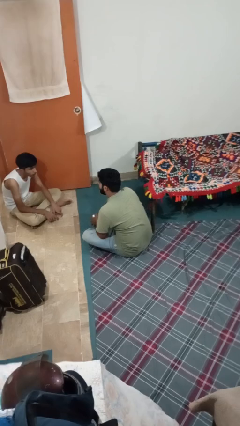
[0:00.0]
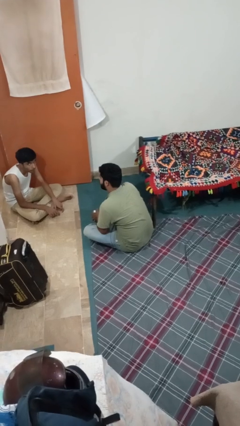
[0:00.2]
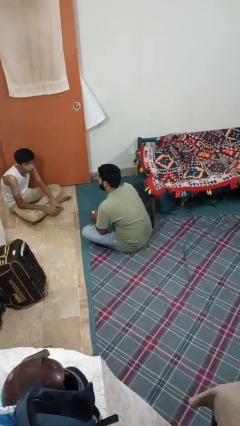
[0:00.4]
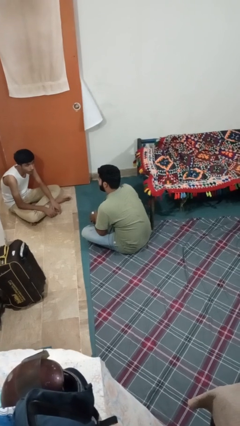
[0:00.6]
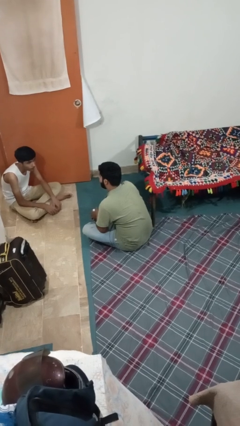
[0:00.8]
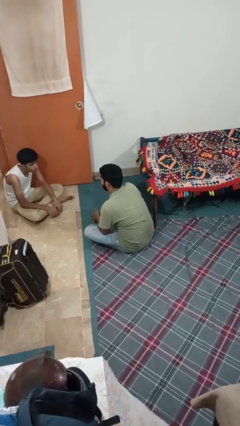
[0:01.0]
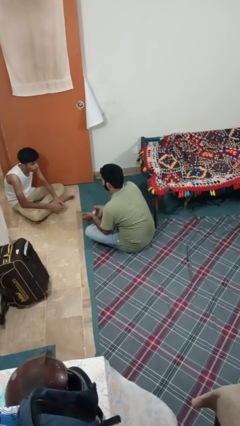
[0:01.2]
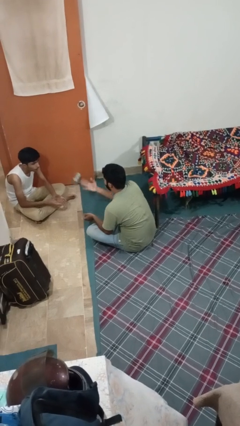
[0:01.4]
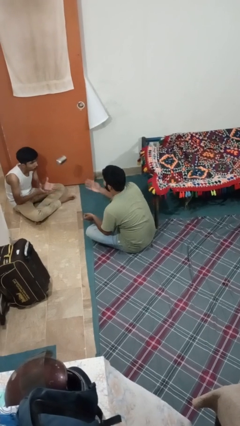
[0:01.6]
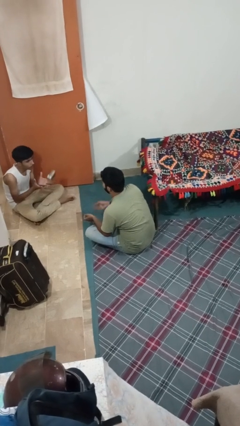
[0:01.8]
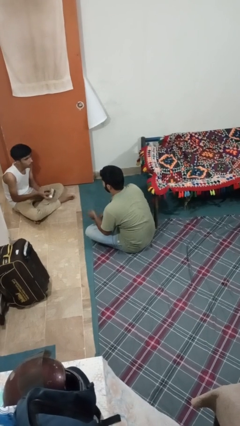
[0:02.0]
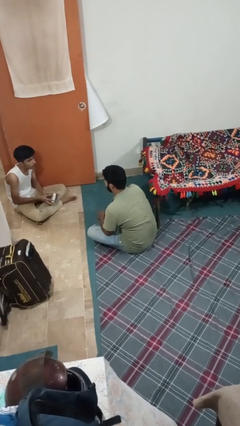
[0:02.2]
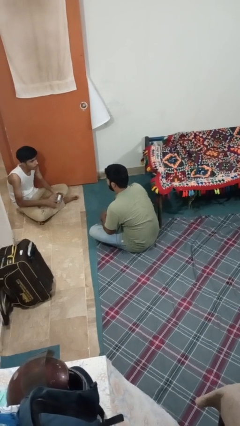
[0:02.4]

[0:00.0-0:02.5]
person throws object to person

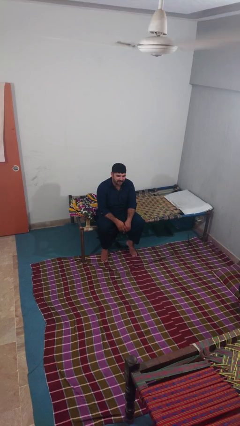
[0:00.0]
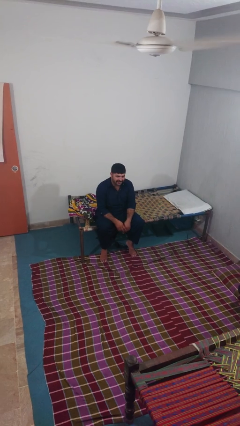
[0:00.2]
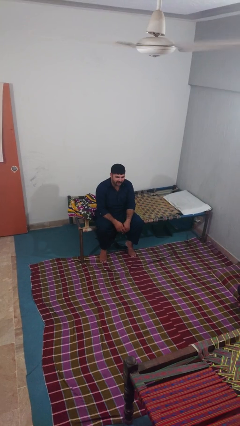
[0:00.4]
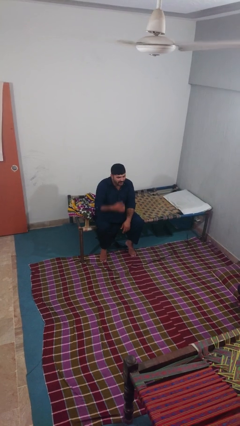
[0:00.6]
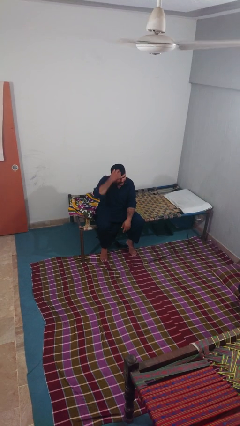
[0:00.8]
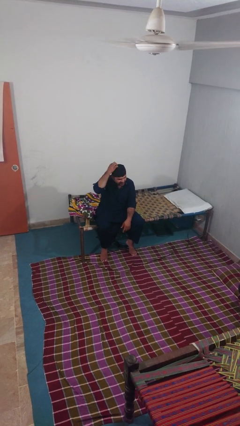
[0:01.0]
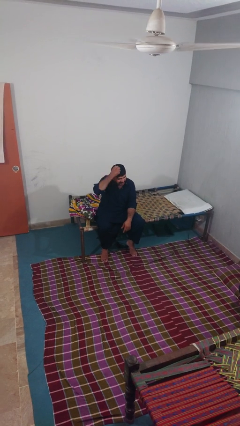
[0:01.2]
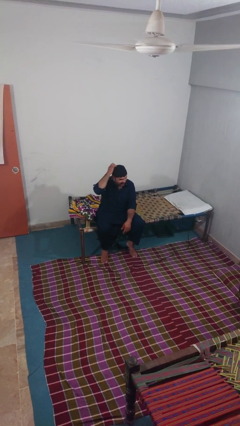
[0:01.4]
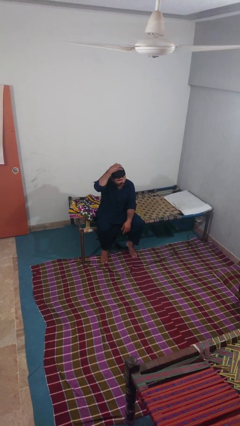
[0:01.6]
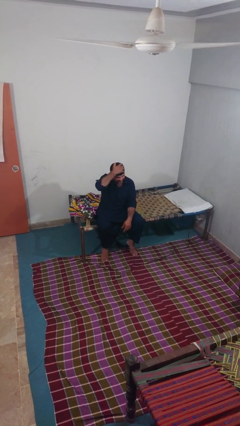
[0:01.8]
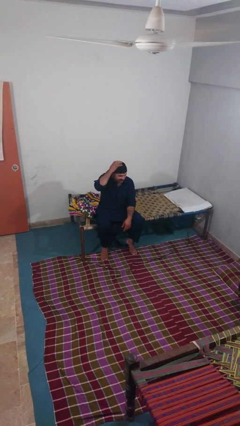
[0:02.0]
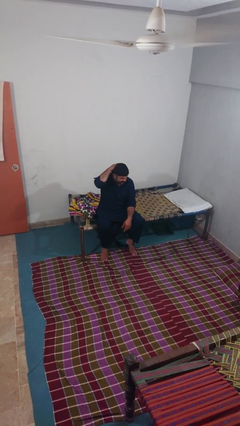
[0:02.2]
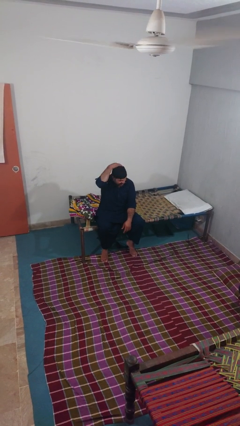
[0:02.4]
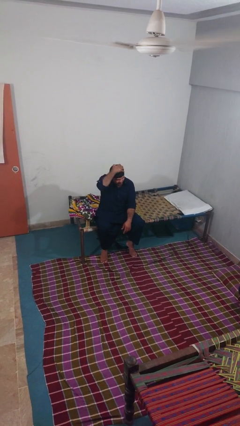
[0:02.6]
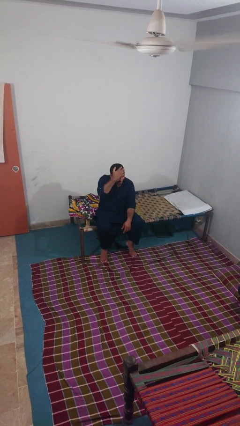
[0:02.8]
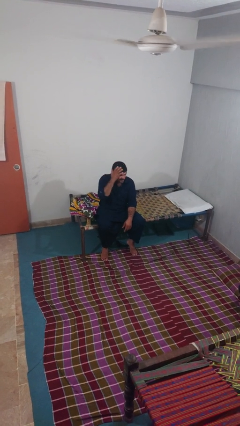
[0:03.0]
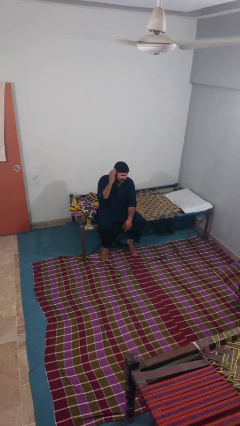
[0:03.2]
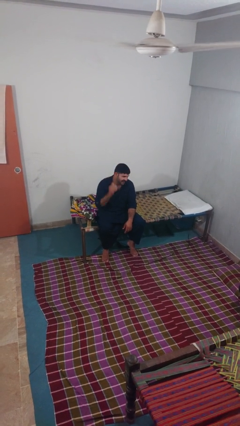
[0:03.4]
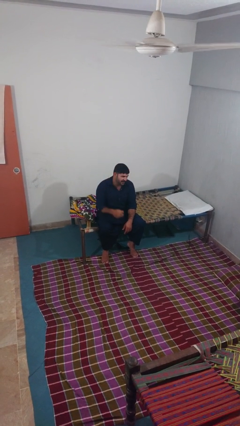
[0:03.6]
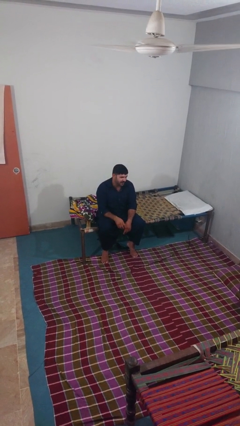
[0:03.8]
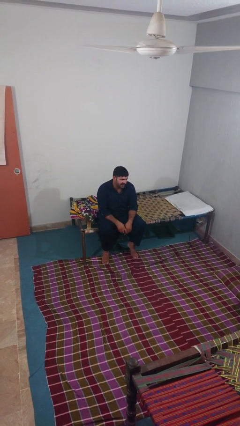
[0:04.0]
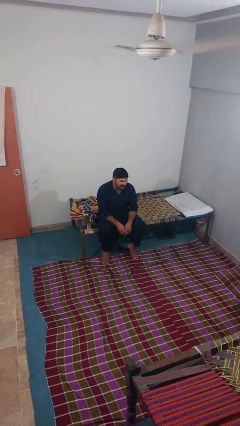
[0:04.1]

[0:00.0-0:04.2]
person scratches face

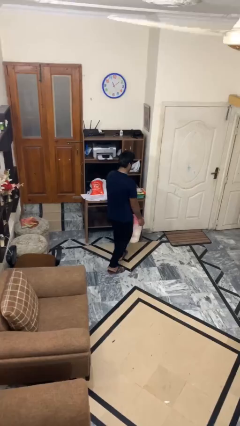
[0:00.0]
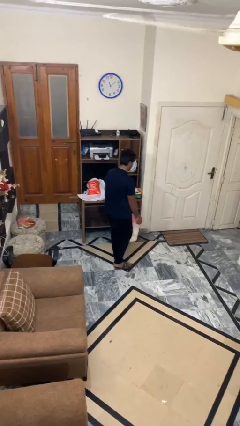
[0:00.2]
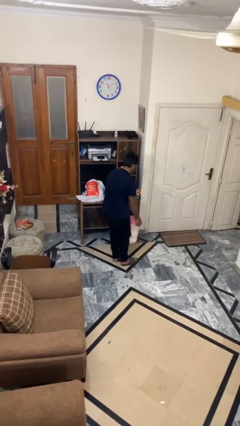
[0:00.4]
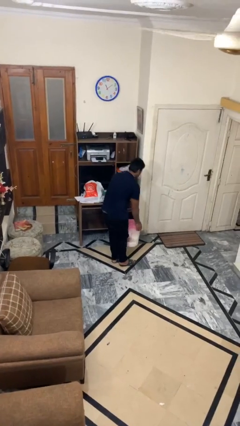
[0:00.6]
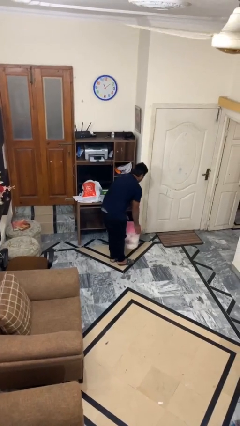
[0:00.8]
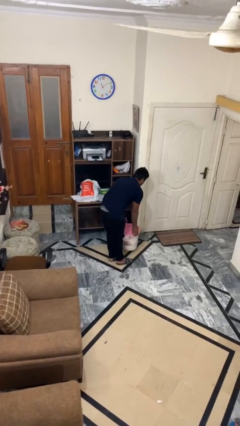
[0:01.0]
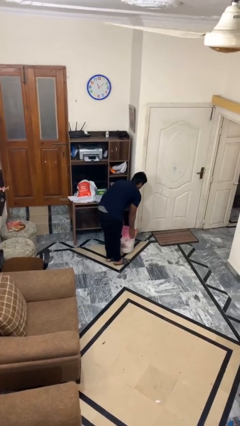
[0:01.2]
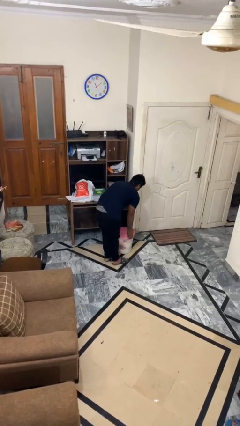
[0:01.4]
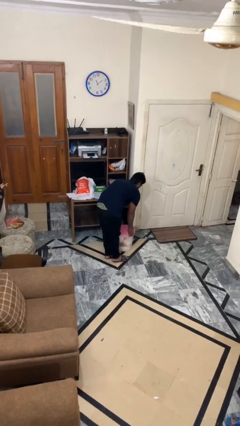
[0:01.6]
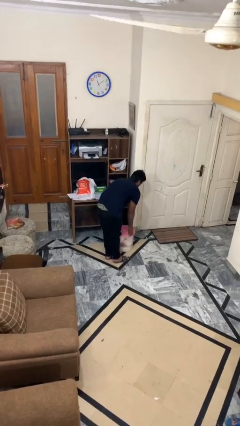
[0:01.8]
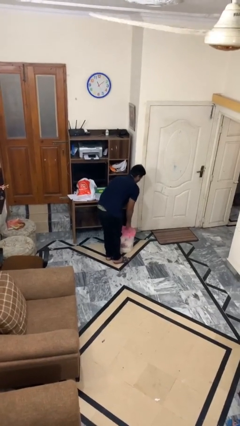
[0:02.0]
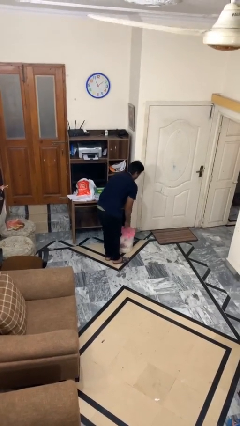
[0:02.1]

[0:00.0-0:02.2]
person puts down object on floor

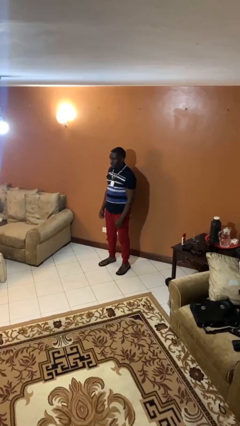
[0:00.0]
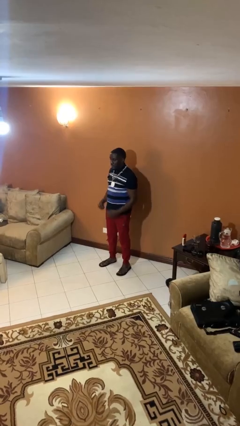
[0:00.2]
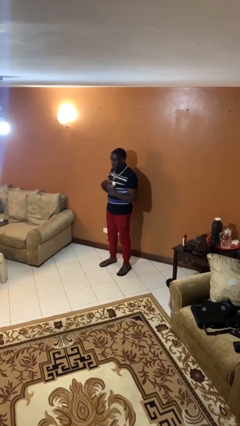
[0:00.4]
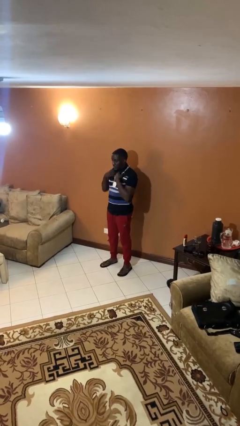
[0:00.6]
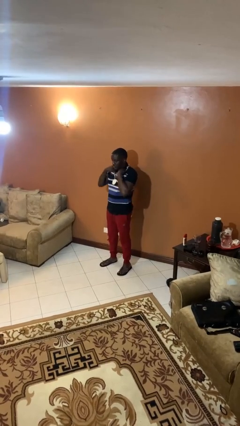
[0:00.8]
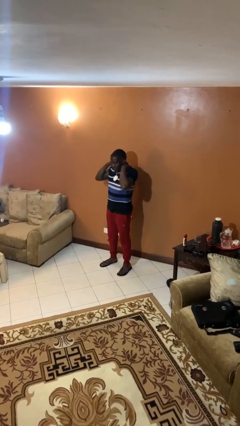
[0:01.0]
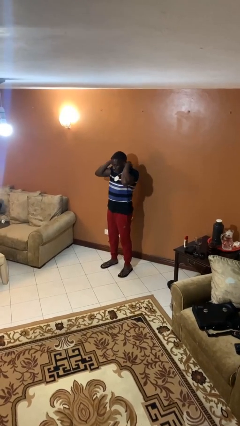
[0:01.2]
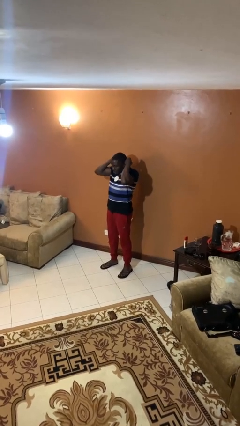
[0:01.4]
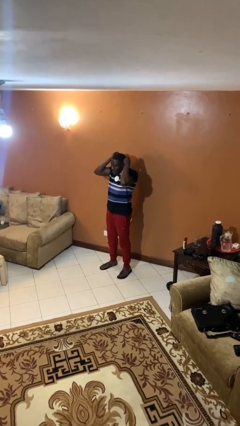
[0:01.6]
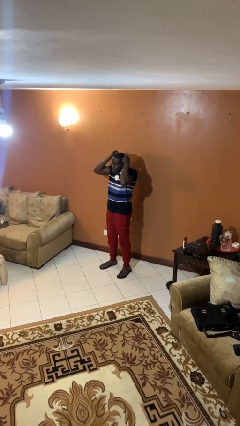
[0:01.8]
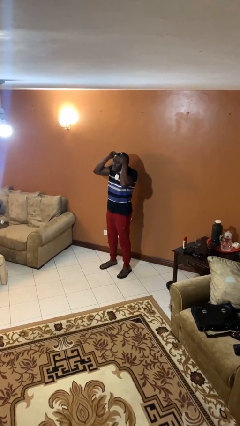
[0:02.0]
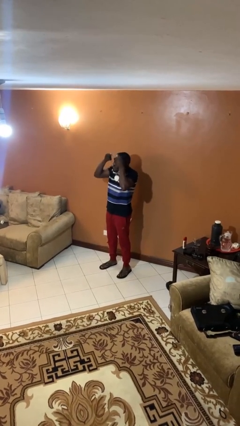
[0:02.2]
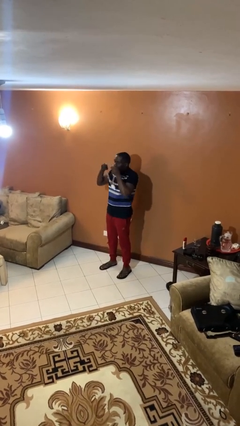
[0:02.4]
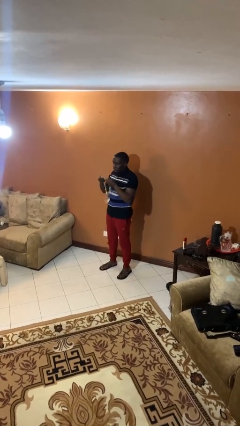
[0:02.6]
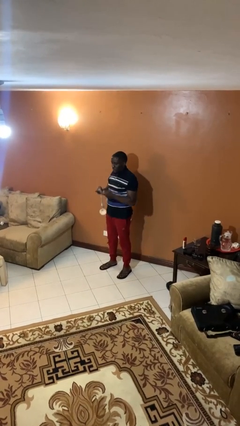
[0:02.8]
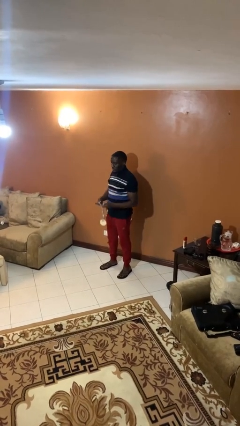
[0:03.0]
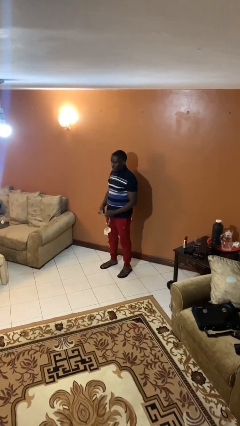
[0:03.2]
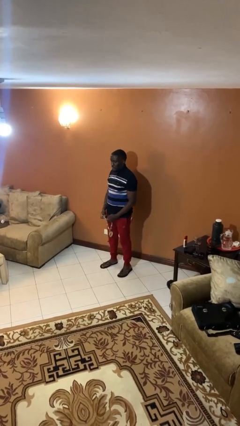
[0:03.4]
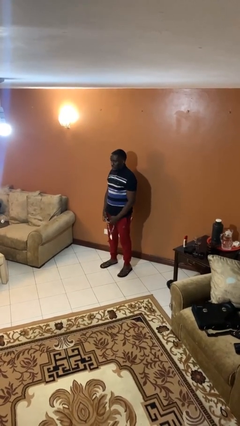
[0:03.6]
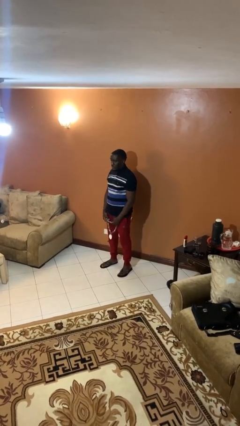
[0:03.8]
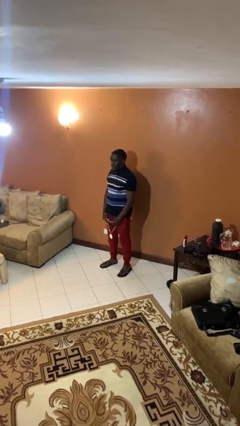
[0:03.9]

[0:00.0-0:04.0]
person takes off necklace

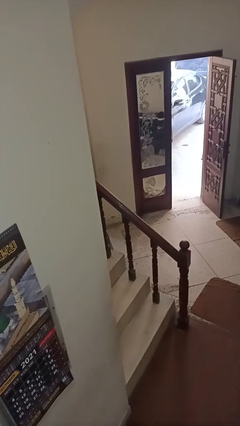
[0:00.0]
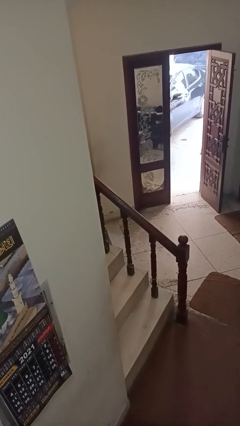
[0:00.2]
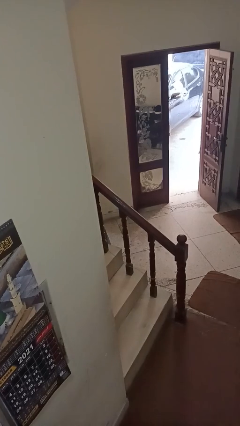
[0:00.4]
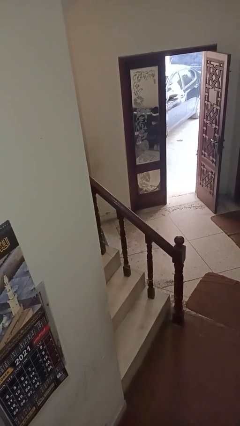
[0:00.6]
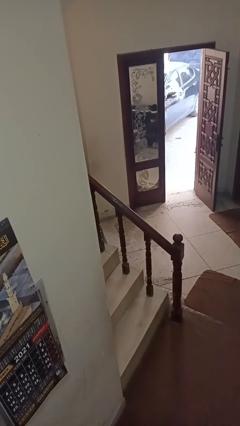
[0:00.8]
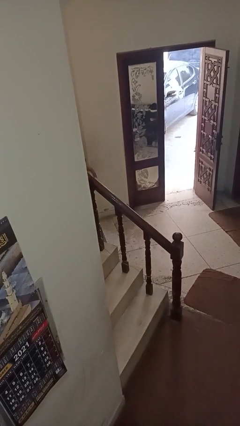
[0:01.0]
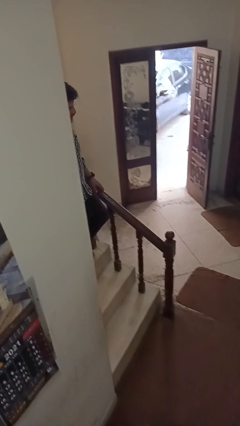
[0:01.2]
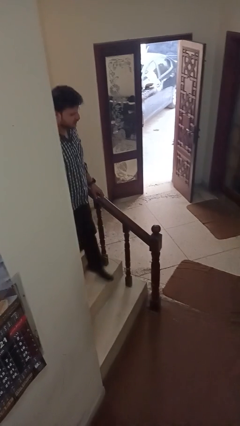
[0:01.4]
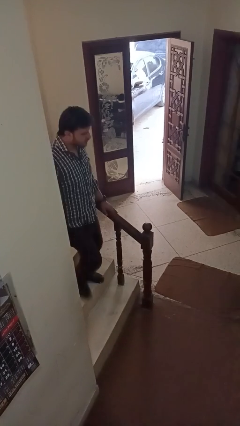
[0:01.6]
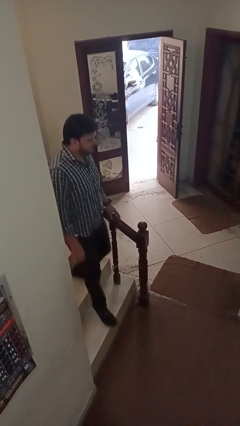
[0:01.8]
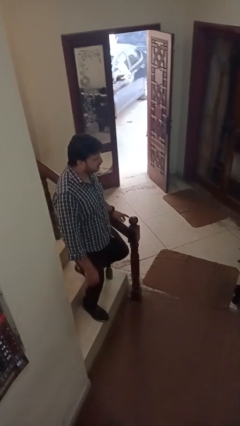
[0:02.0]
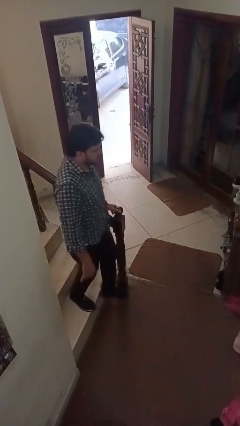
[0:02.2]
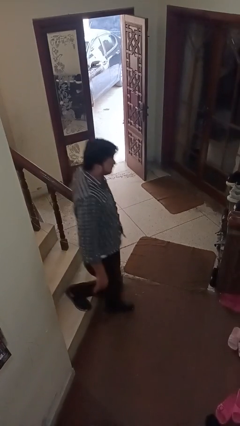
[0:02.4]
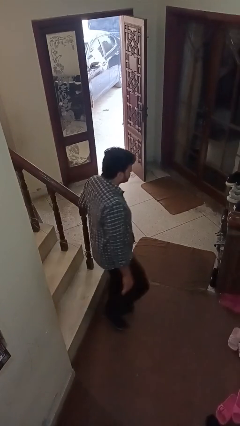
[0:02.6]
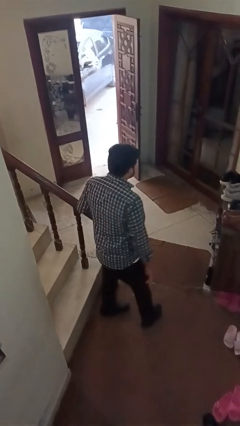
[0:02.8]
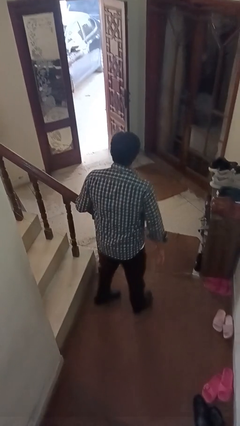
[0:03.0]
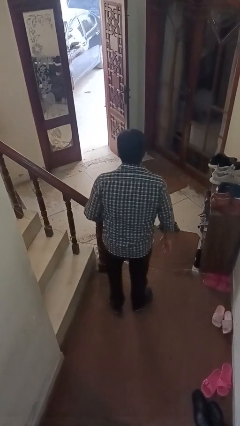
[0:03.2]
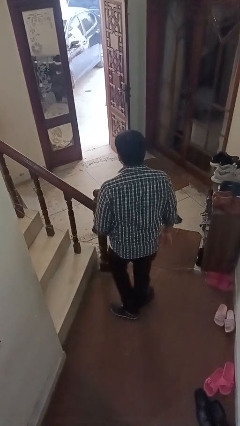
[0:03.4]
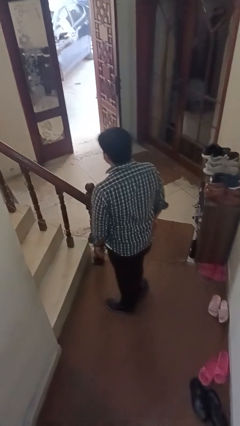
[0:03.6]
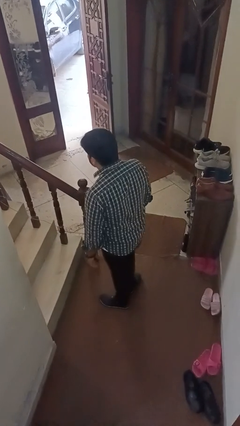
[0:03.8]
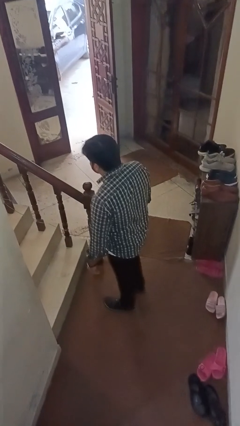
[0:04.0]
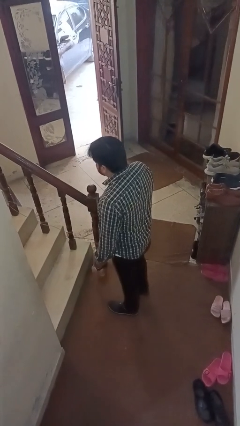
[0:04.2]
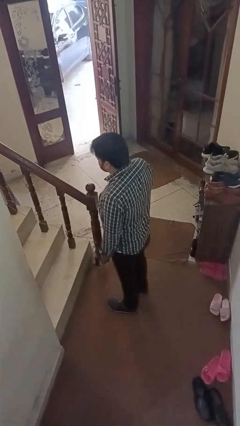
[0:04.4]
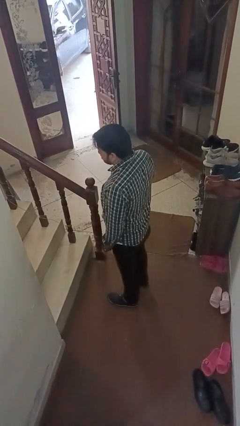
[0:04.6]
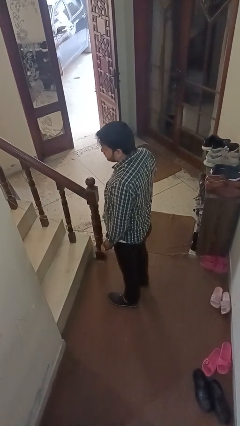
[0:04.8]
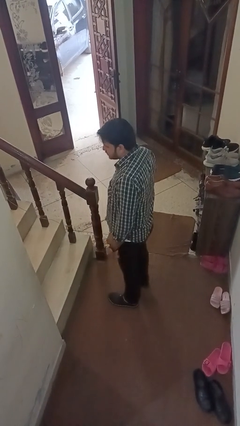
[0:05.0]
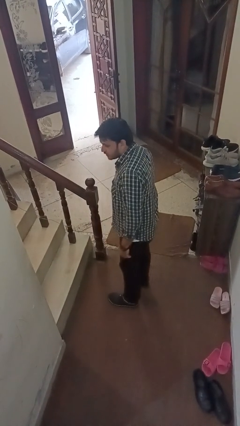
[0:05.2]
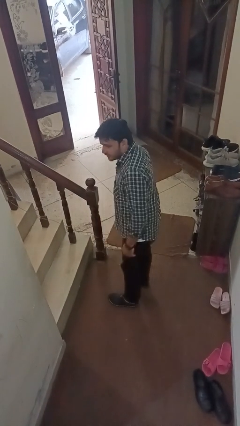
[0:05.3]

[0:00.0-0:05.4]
person climbs down stairs
